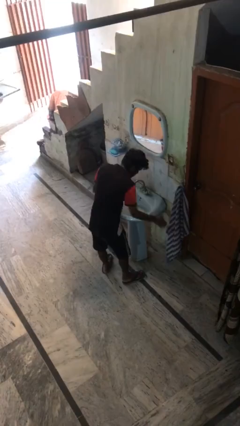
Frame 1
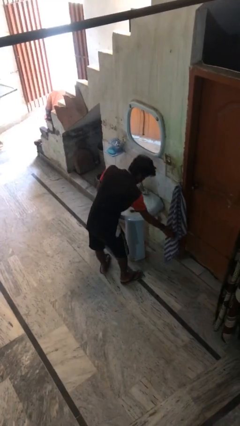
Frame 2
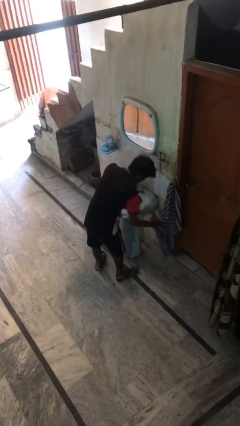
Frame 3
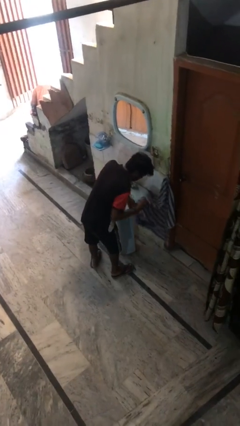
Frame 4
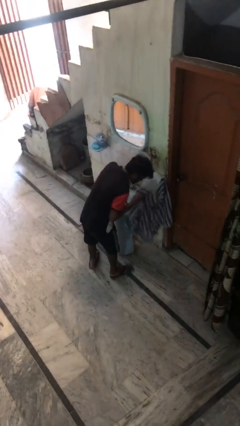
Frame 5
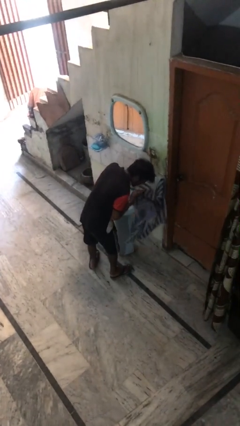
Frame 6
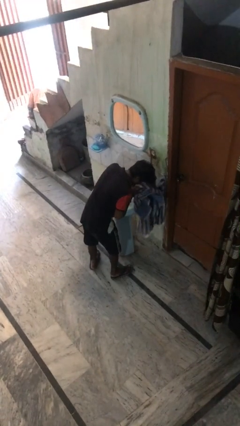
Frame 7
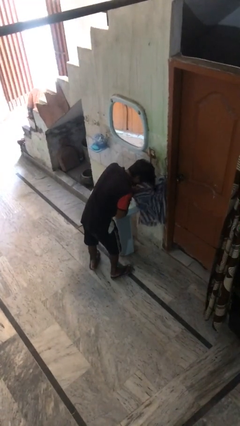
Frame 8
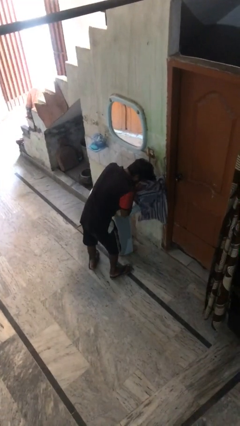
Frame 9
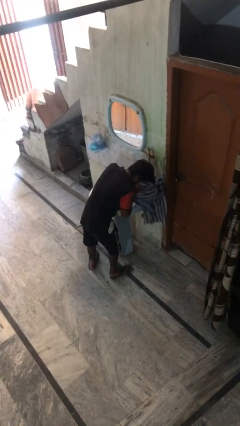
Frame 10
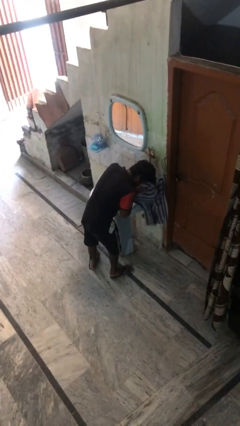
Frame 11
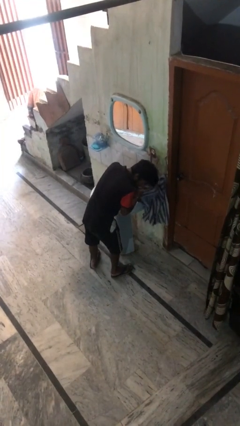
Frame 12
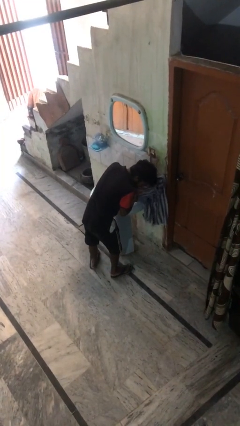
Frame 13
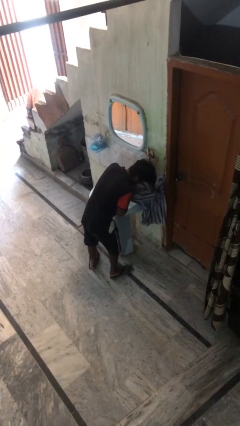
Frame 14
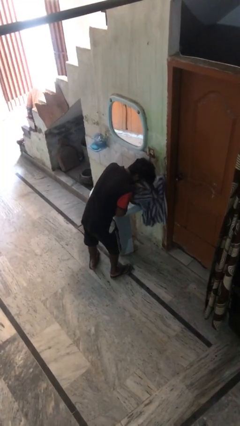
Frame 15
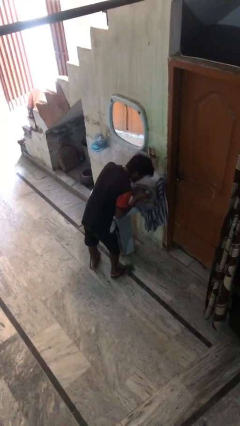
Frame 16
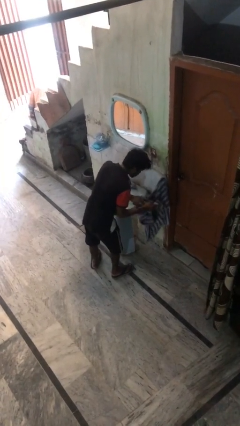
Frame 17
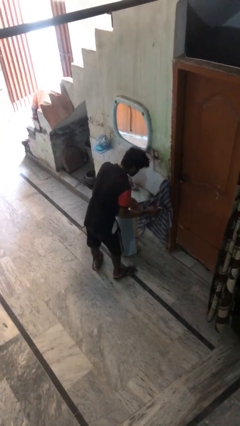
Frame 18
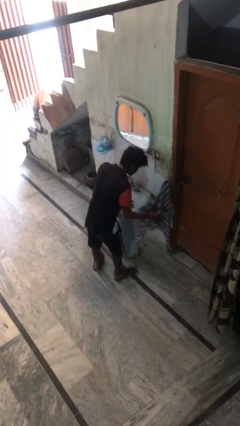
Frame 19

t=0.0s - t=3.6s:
person dries face with towel

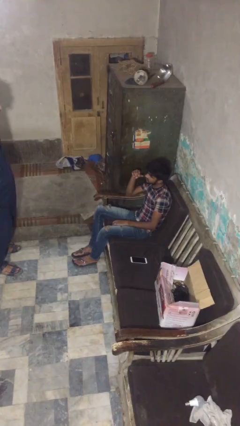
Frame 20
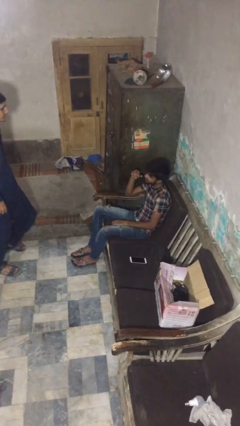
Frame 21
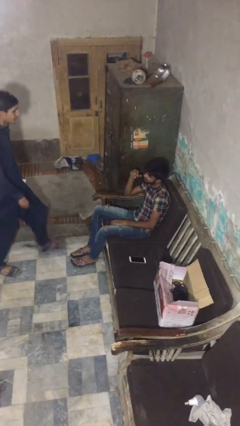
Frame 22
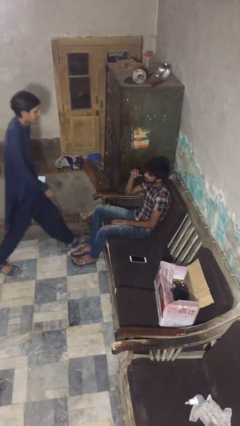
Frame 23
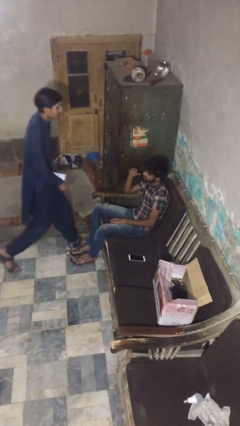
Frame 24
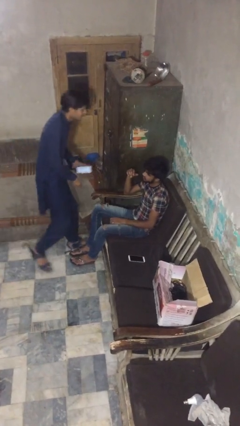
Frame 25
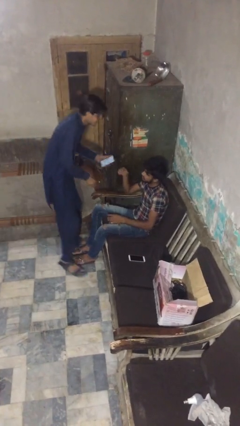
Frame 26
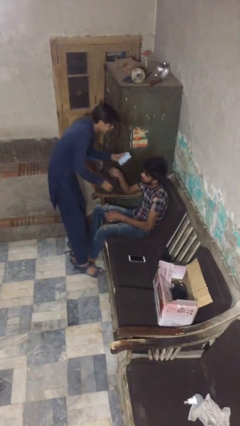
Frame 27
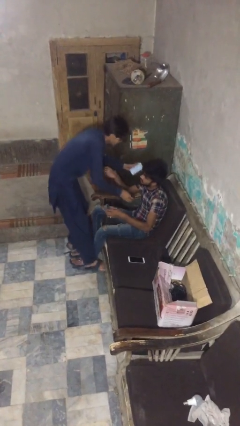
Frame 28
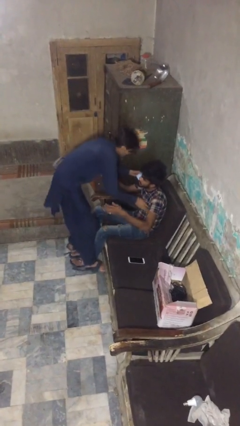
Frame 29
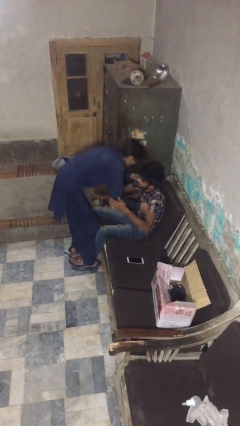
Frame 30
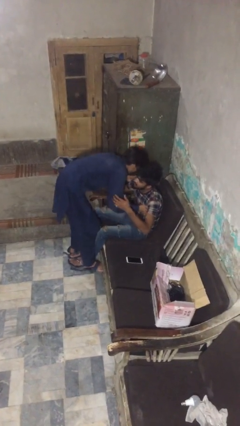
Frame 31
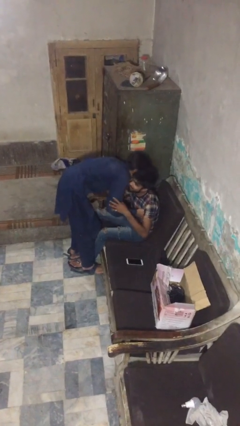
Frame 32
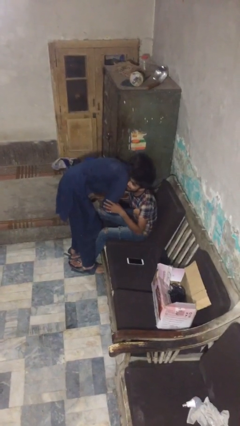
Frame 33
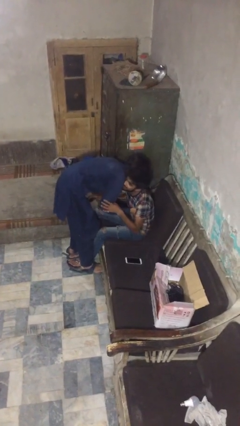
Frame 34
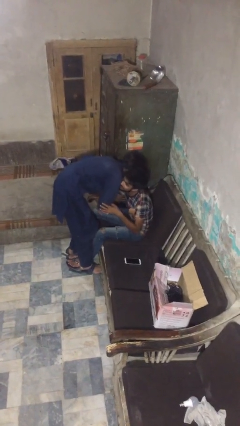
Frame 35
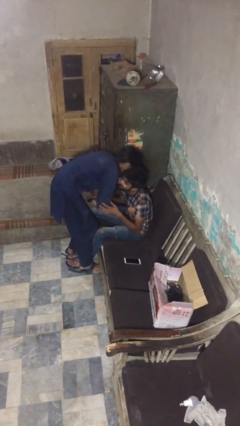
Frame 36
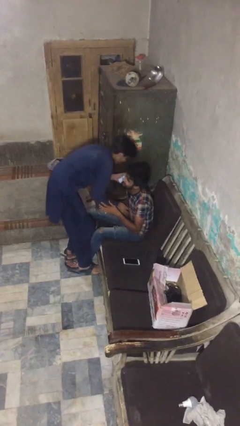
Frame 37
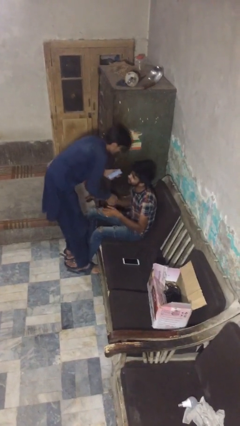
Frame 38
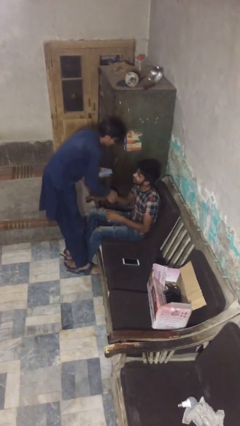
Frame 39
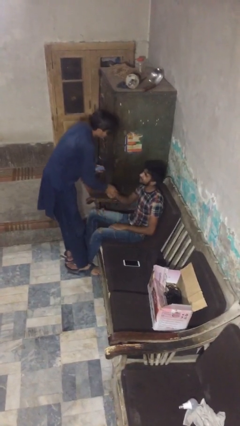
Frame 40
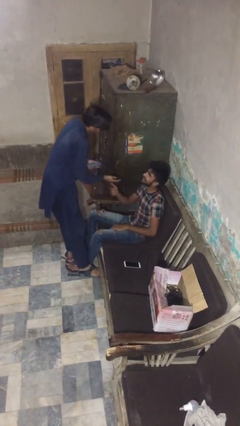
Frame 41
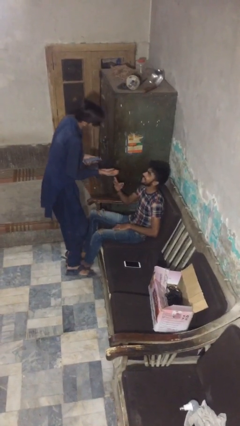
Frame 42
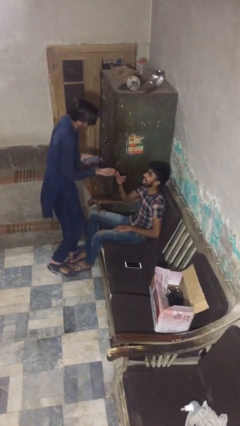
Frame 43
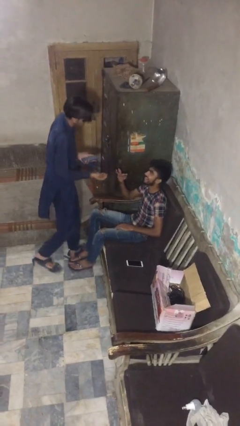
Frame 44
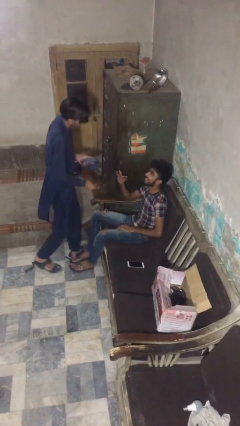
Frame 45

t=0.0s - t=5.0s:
person embraces person

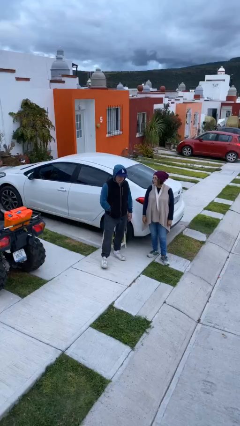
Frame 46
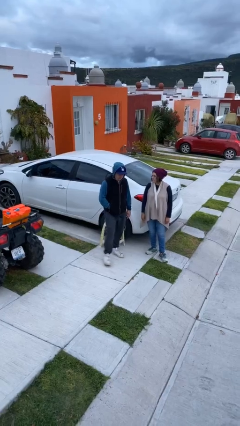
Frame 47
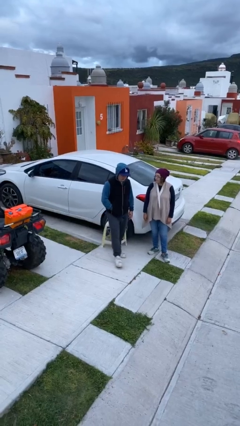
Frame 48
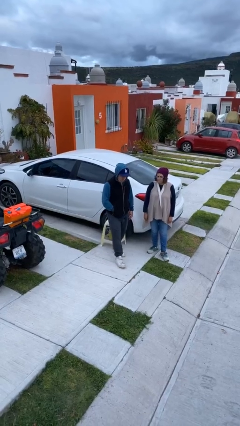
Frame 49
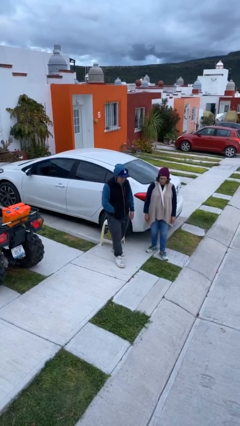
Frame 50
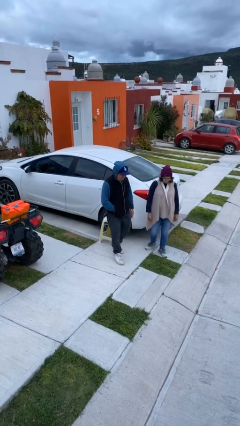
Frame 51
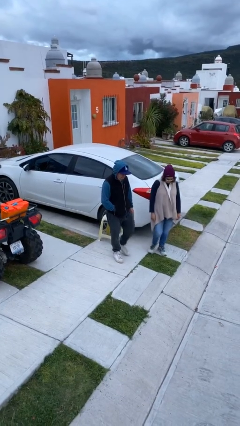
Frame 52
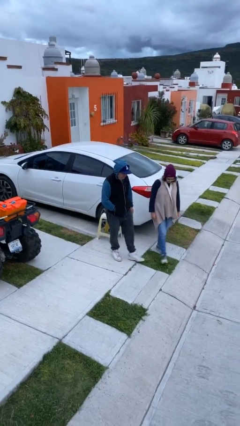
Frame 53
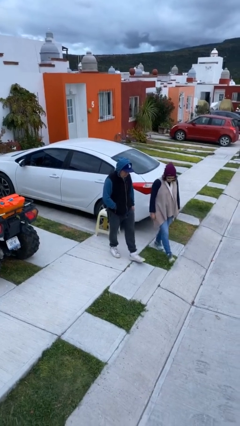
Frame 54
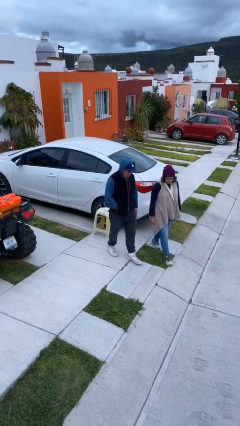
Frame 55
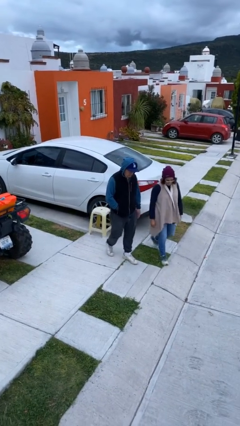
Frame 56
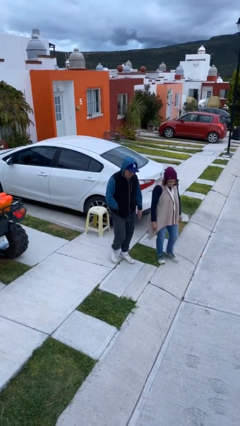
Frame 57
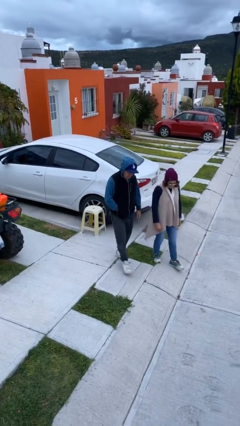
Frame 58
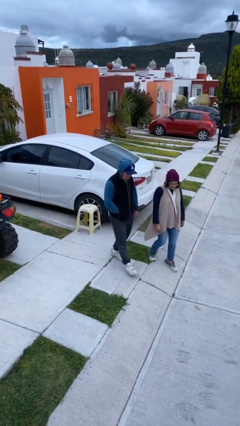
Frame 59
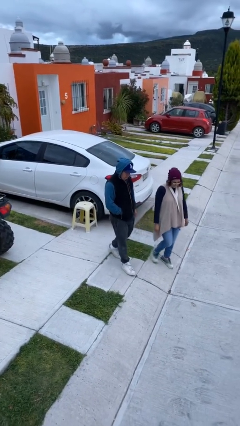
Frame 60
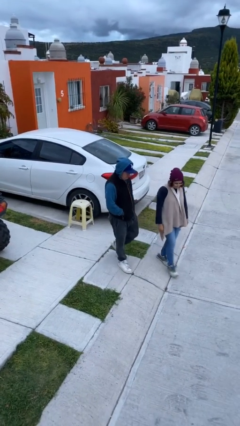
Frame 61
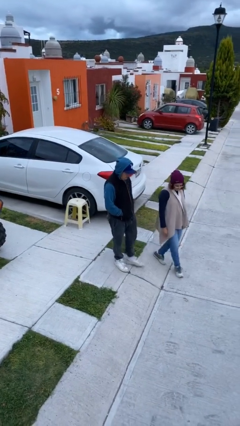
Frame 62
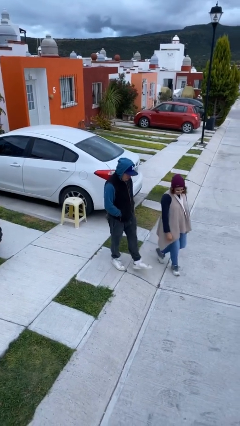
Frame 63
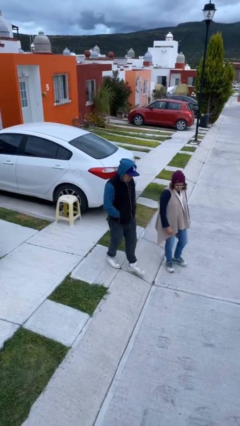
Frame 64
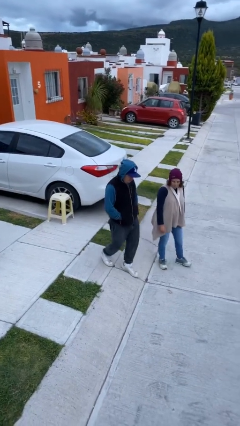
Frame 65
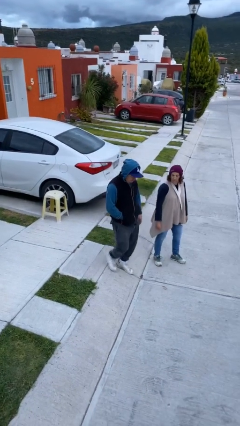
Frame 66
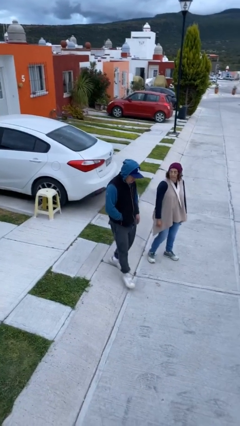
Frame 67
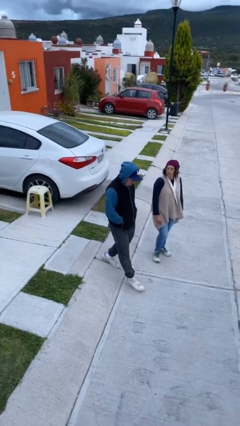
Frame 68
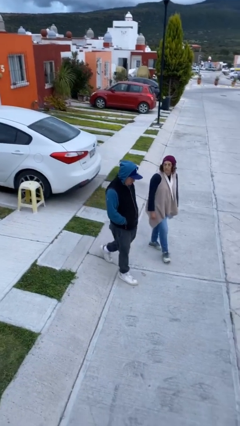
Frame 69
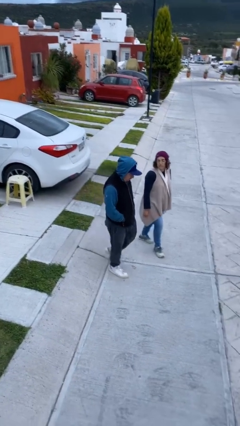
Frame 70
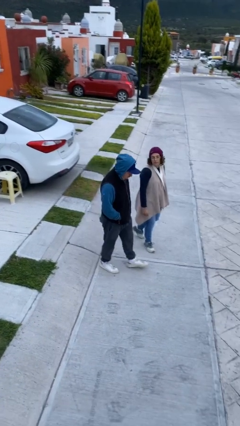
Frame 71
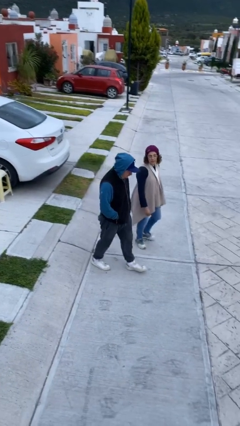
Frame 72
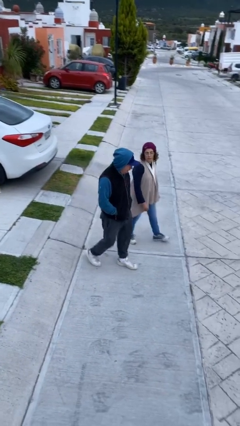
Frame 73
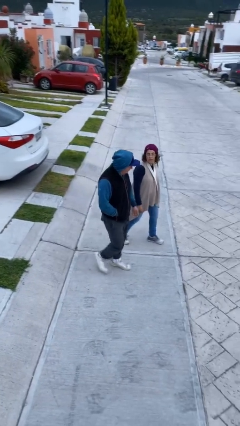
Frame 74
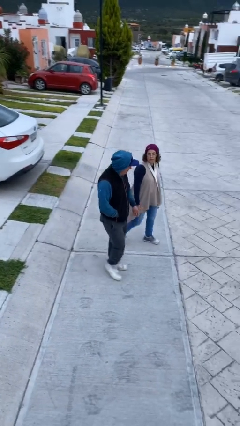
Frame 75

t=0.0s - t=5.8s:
person talks to person

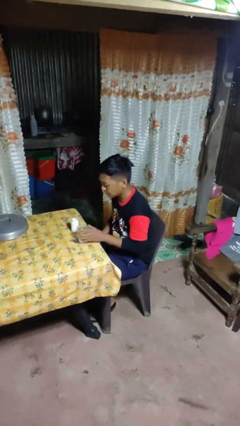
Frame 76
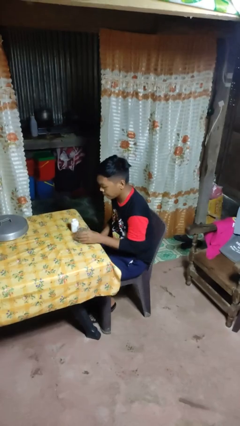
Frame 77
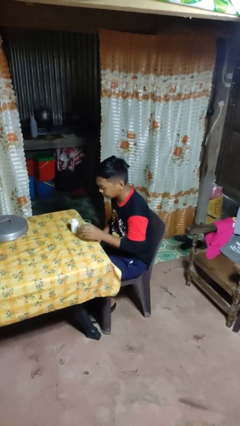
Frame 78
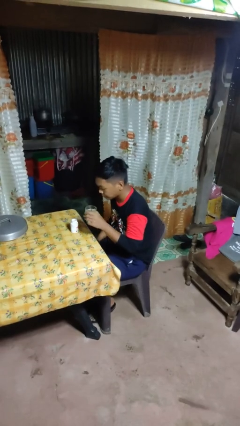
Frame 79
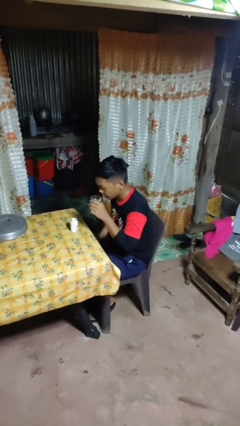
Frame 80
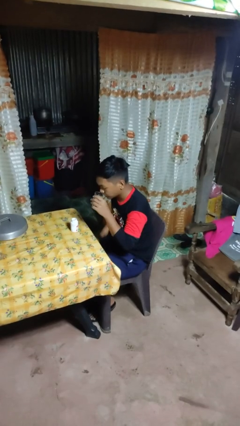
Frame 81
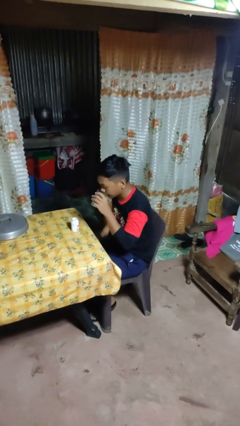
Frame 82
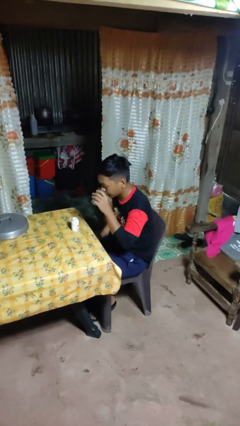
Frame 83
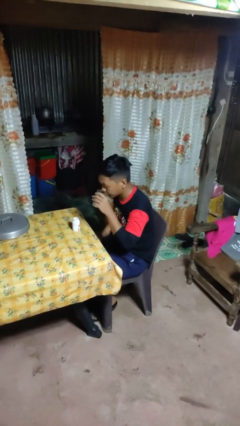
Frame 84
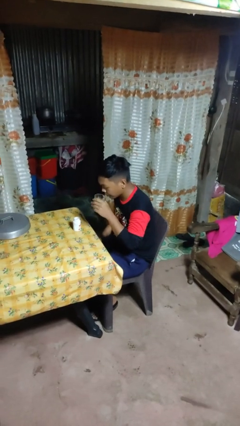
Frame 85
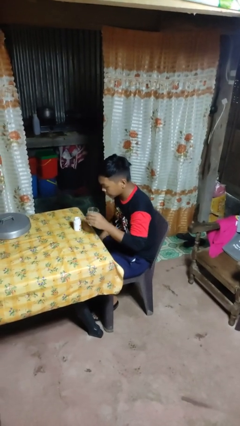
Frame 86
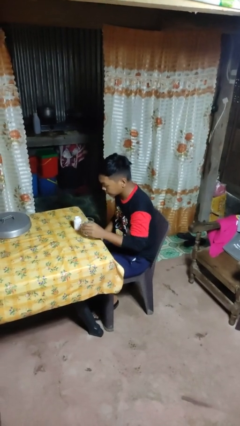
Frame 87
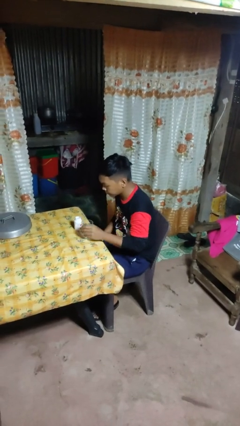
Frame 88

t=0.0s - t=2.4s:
person drinks from cup

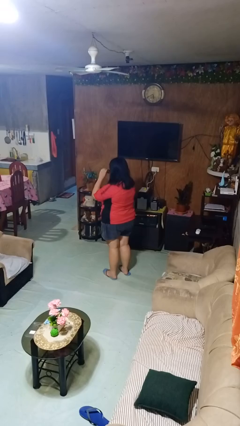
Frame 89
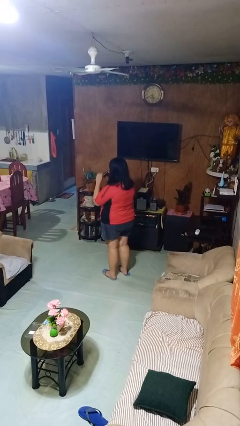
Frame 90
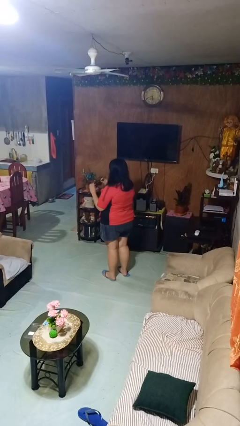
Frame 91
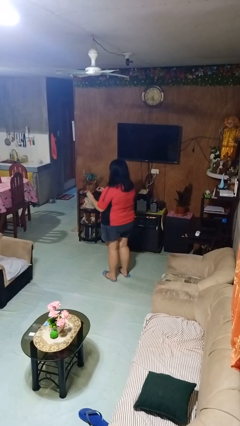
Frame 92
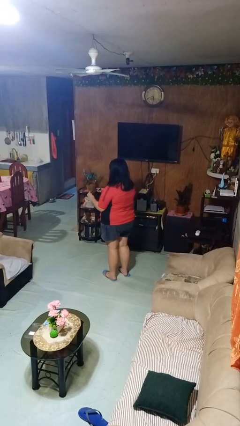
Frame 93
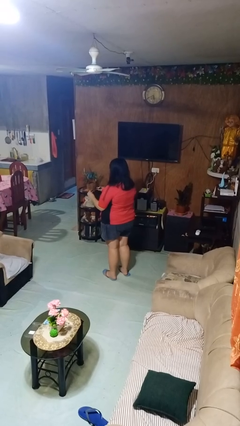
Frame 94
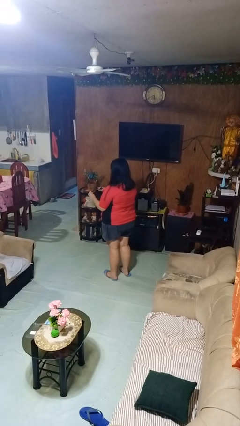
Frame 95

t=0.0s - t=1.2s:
person takes off sunglasses
